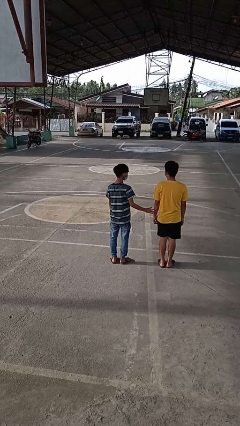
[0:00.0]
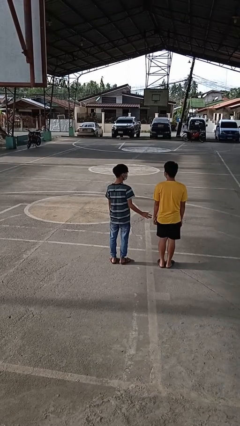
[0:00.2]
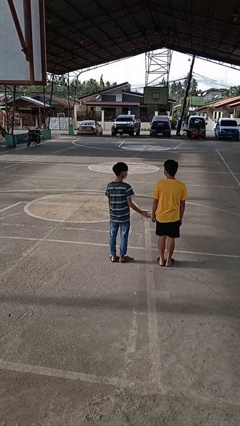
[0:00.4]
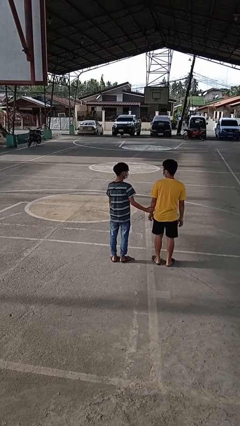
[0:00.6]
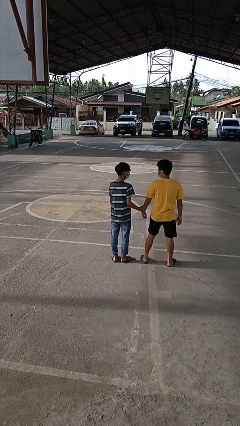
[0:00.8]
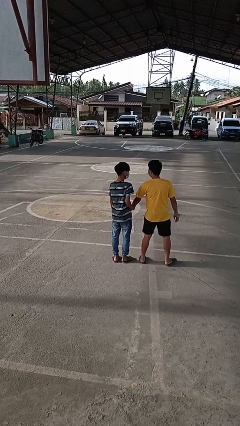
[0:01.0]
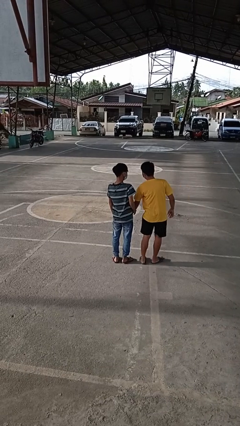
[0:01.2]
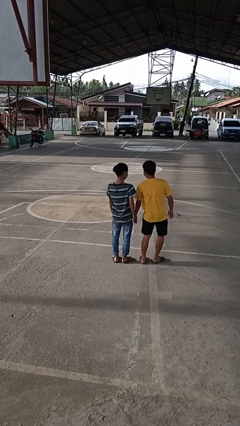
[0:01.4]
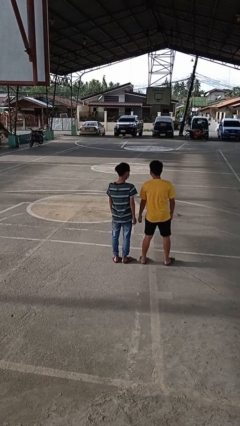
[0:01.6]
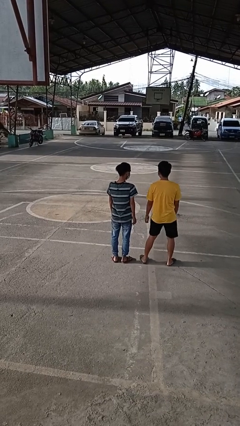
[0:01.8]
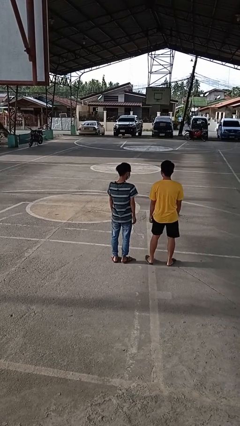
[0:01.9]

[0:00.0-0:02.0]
person grabs person by forearm

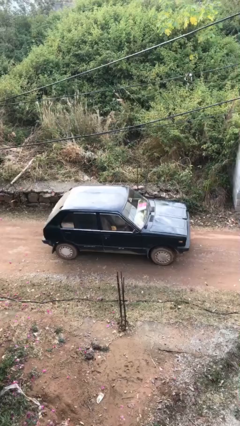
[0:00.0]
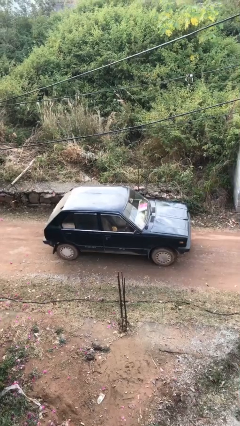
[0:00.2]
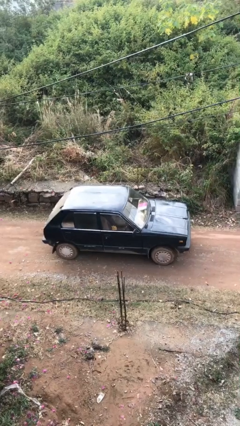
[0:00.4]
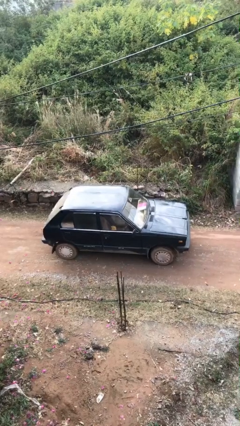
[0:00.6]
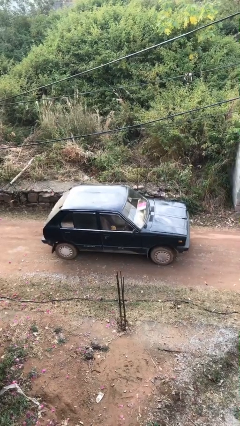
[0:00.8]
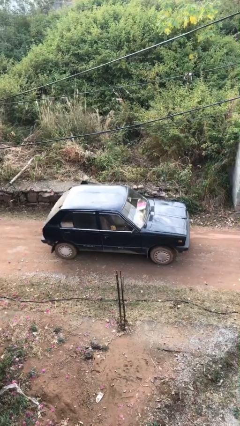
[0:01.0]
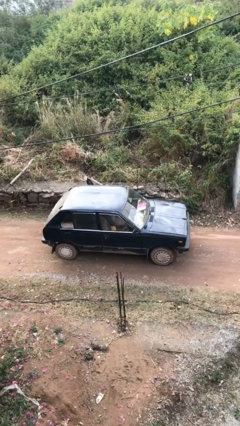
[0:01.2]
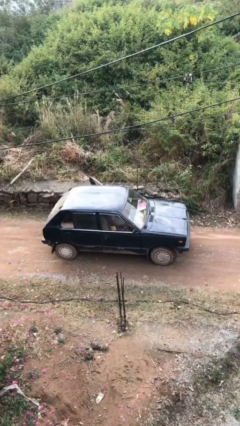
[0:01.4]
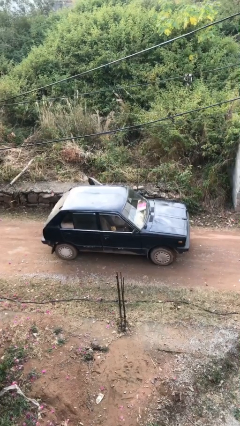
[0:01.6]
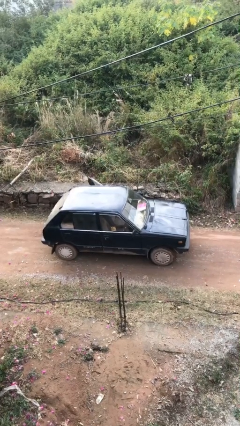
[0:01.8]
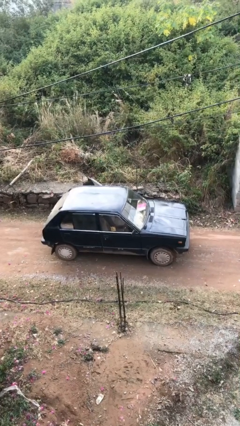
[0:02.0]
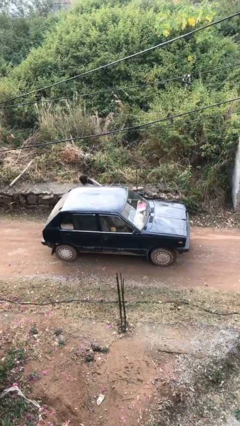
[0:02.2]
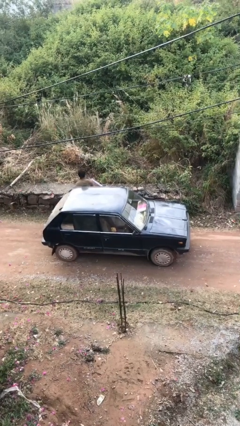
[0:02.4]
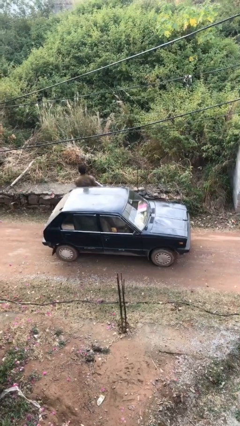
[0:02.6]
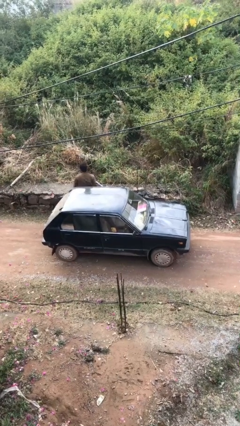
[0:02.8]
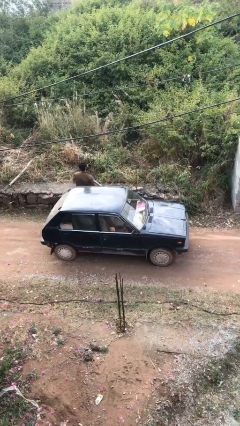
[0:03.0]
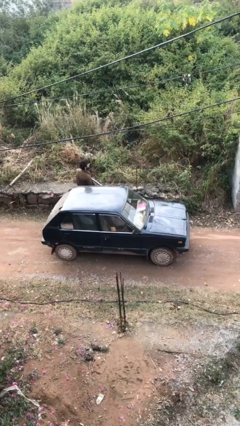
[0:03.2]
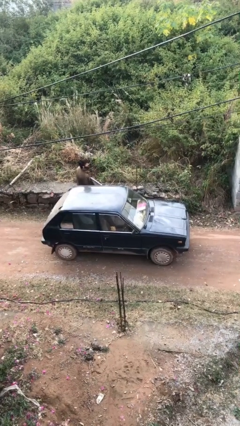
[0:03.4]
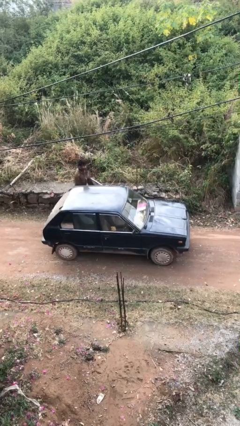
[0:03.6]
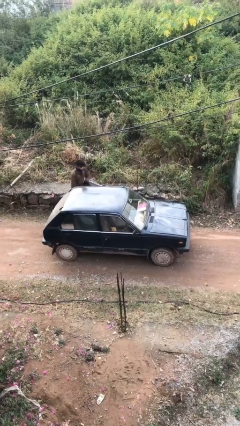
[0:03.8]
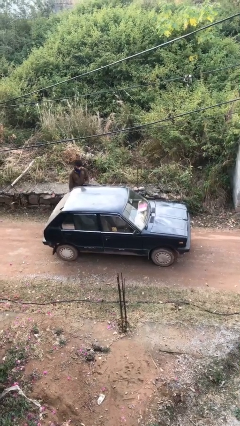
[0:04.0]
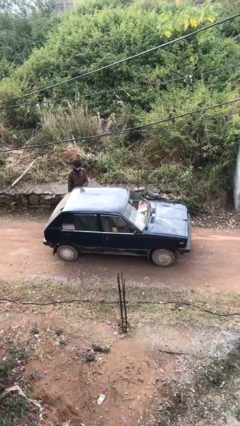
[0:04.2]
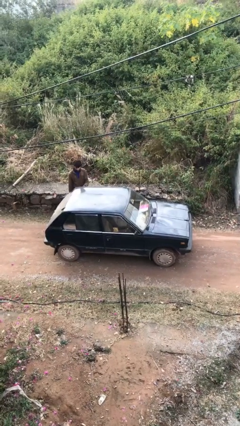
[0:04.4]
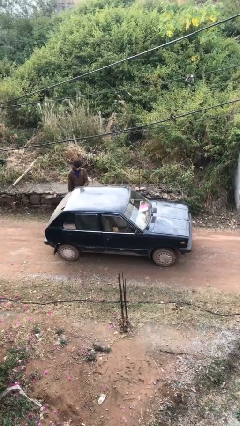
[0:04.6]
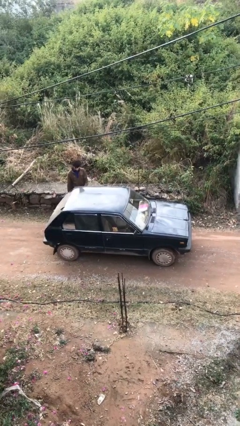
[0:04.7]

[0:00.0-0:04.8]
car drops off person

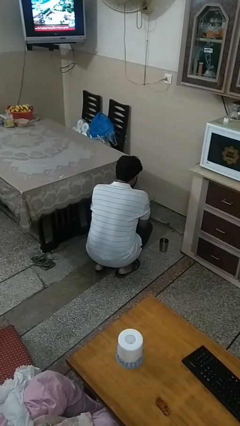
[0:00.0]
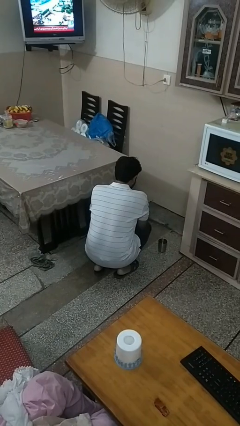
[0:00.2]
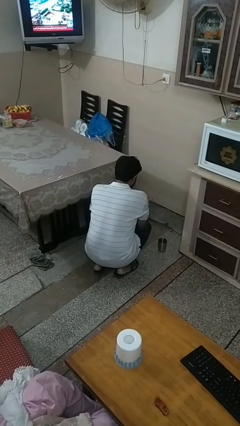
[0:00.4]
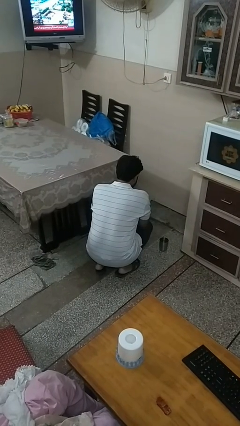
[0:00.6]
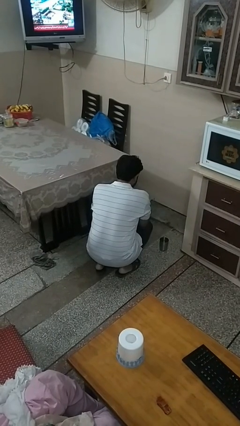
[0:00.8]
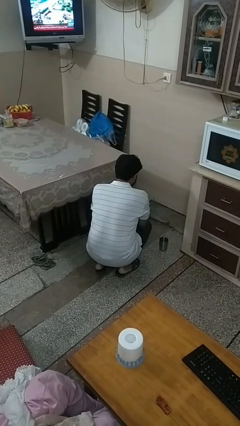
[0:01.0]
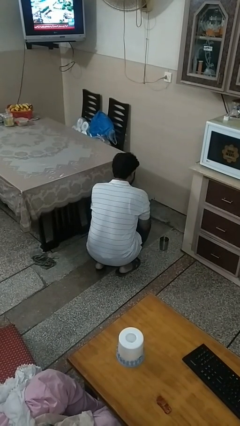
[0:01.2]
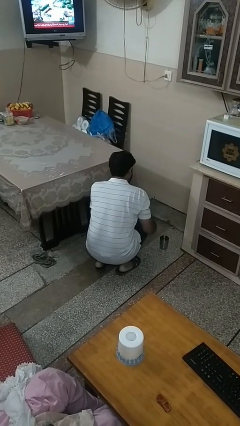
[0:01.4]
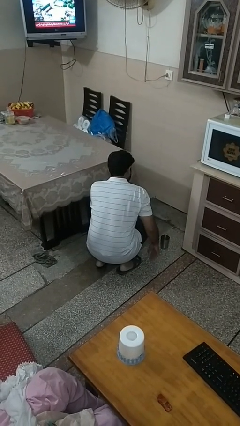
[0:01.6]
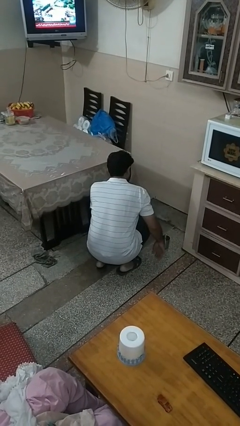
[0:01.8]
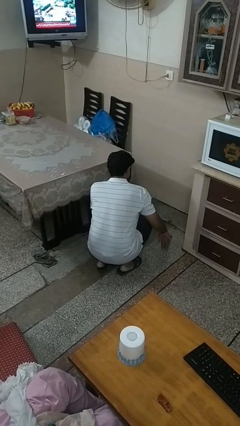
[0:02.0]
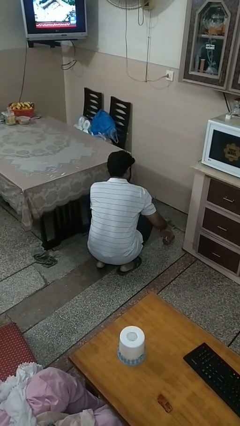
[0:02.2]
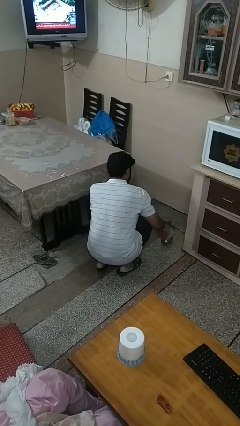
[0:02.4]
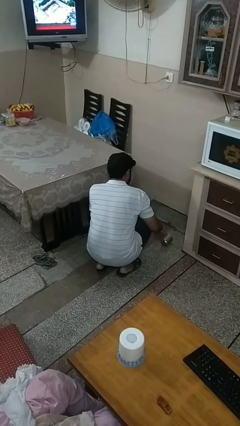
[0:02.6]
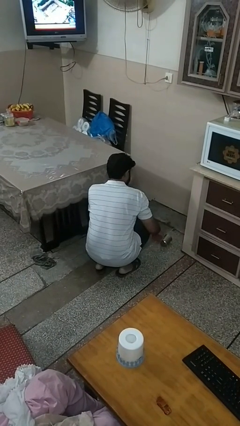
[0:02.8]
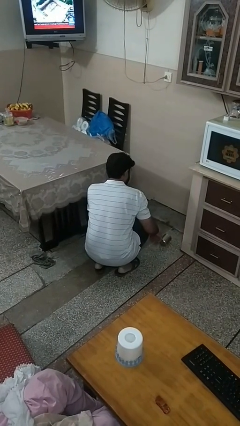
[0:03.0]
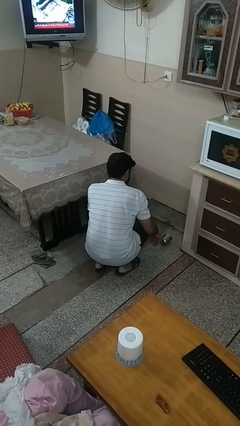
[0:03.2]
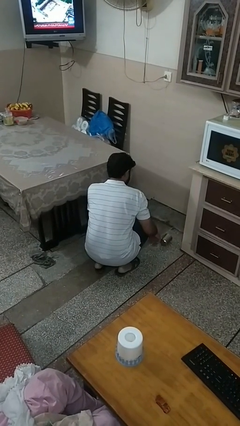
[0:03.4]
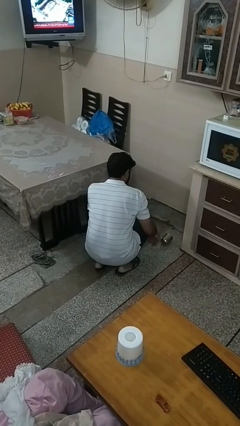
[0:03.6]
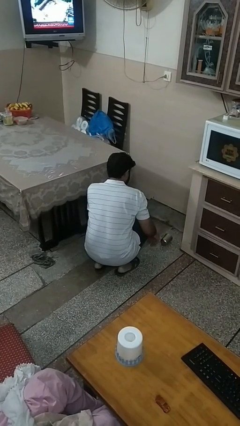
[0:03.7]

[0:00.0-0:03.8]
person spills on floor

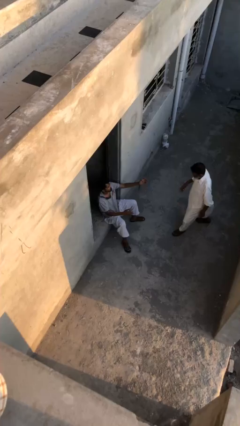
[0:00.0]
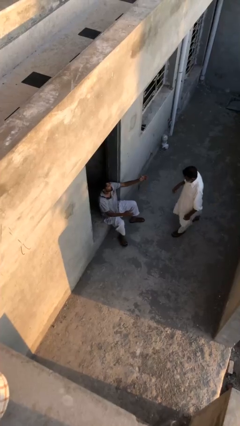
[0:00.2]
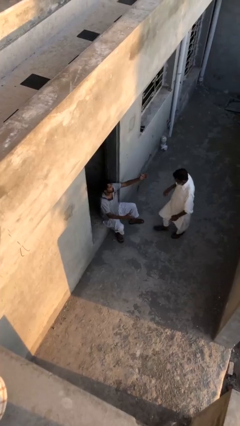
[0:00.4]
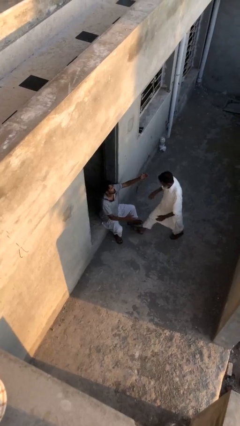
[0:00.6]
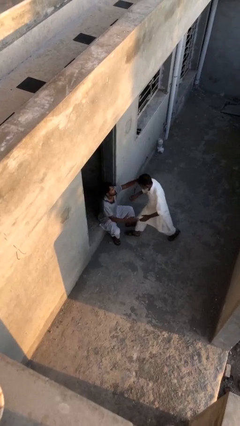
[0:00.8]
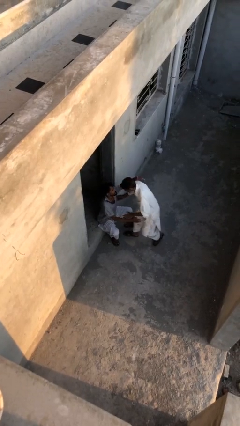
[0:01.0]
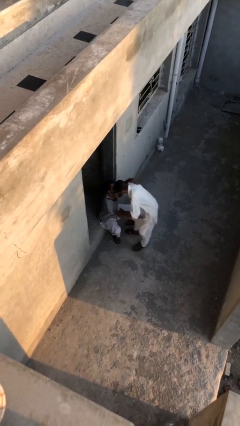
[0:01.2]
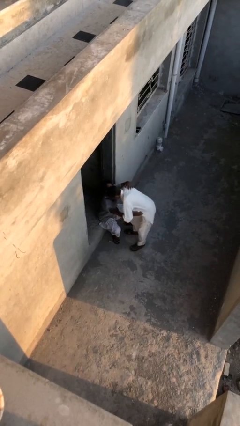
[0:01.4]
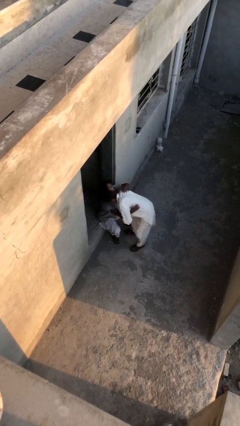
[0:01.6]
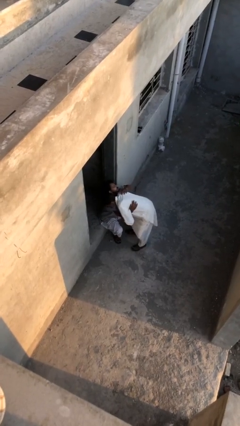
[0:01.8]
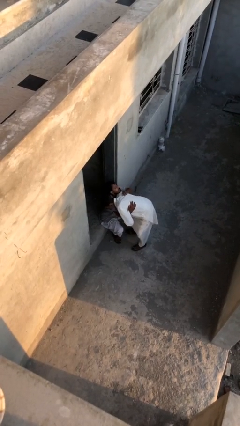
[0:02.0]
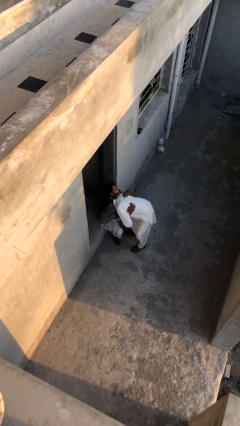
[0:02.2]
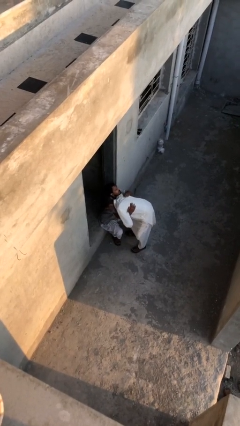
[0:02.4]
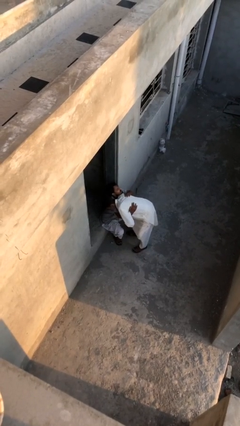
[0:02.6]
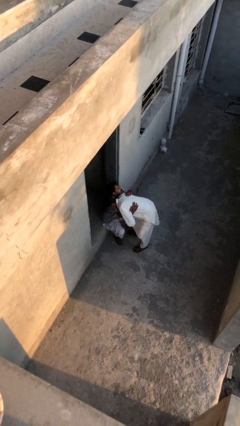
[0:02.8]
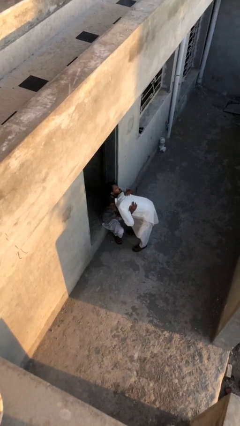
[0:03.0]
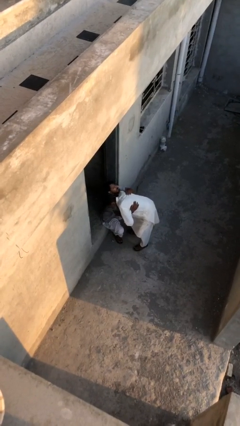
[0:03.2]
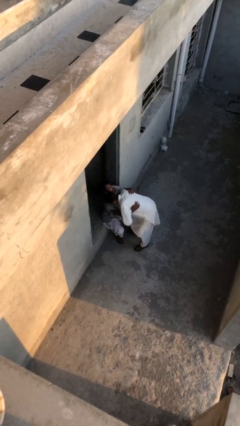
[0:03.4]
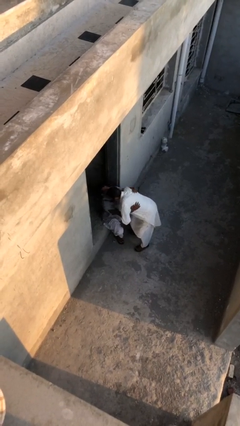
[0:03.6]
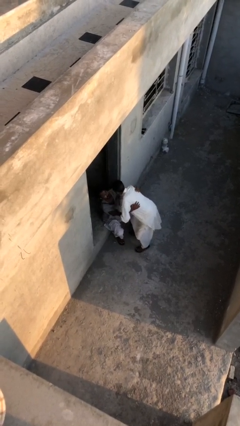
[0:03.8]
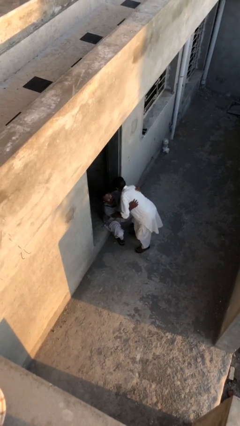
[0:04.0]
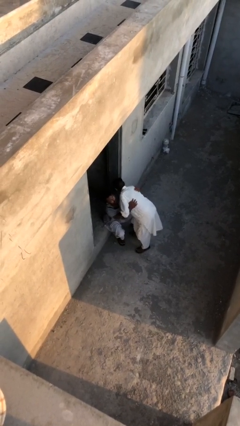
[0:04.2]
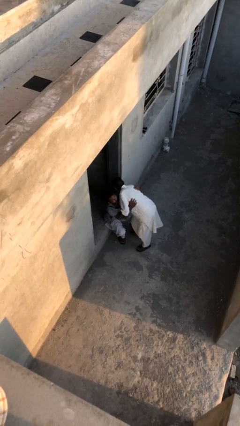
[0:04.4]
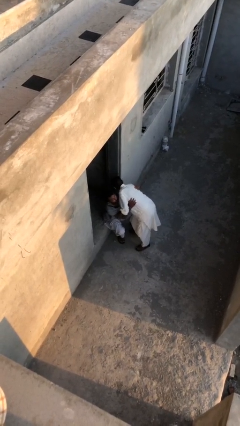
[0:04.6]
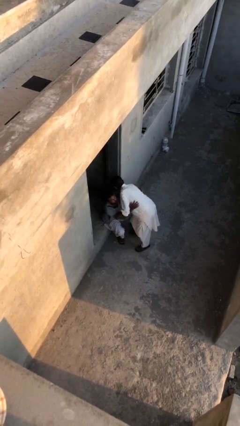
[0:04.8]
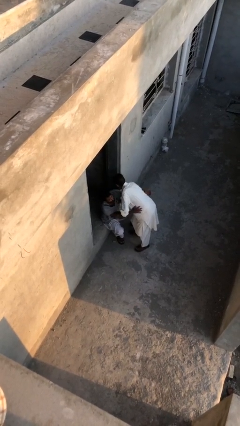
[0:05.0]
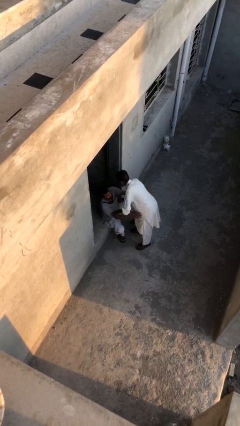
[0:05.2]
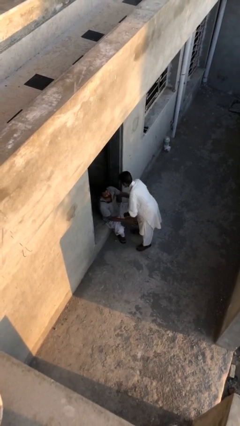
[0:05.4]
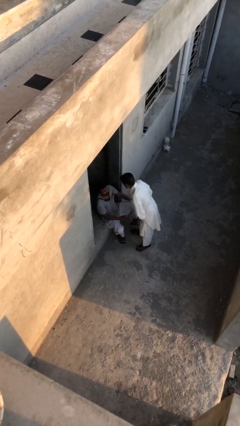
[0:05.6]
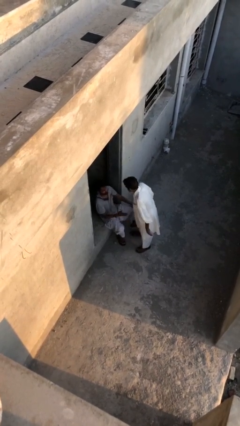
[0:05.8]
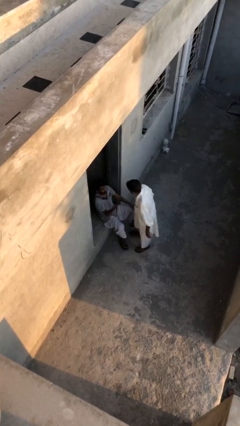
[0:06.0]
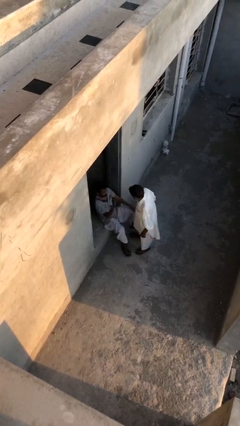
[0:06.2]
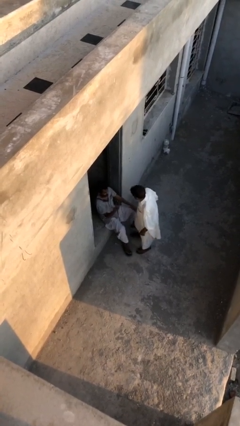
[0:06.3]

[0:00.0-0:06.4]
person embraces person

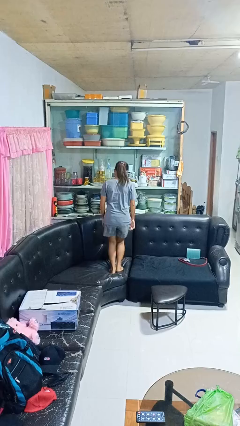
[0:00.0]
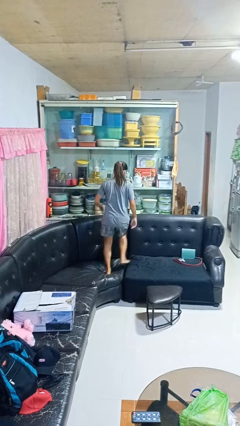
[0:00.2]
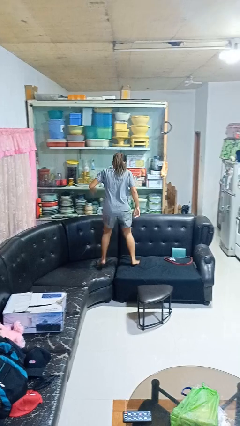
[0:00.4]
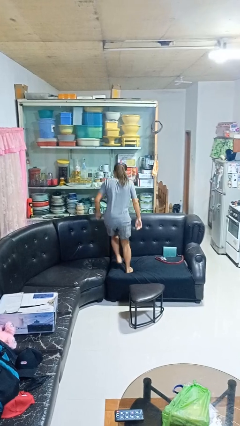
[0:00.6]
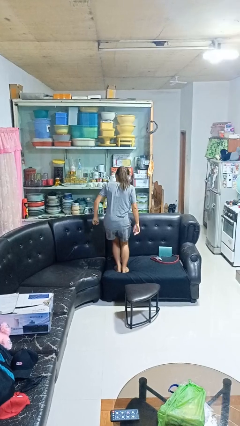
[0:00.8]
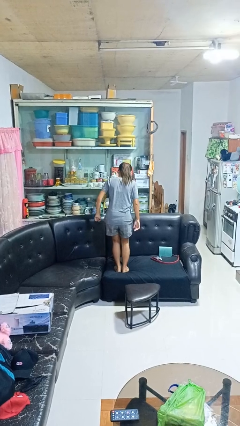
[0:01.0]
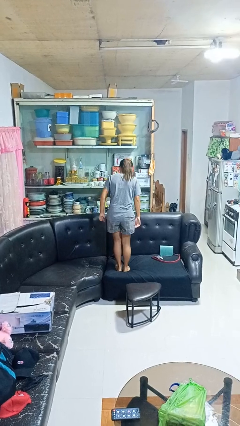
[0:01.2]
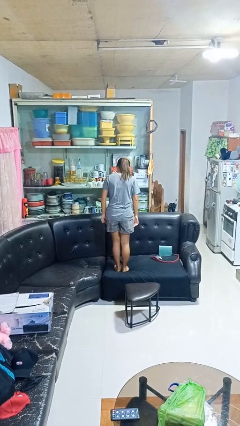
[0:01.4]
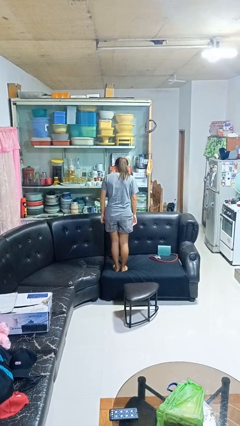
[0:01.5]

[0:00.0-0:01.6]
person jumps on couch
